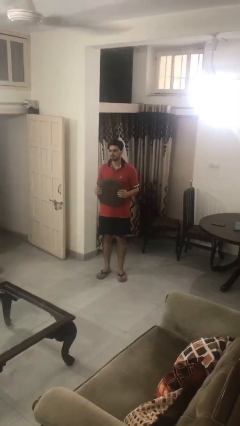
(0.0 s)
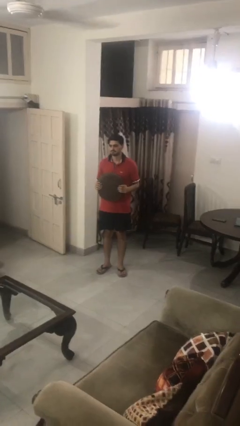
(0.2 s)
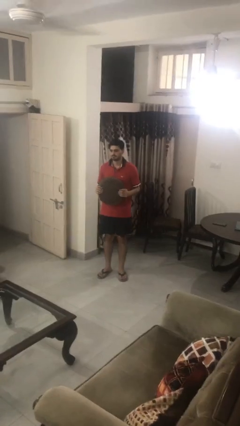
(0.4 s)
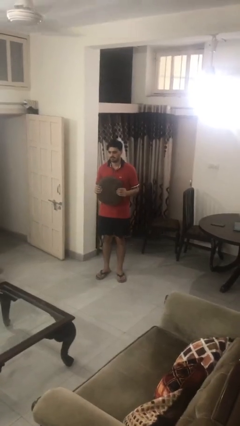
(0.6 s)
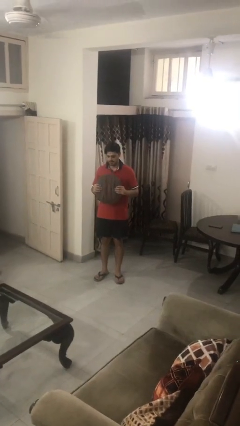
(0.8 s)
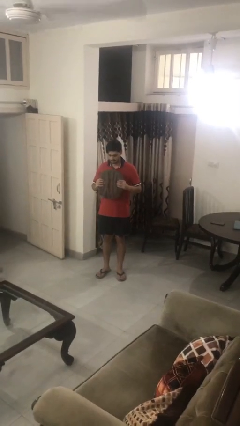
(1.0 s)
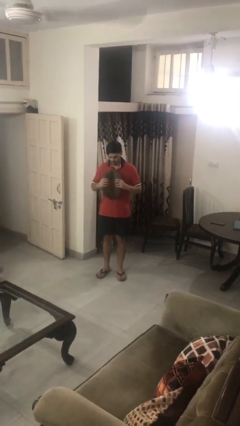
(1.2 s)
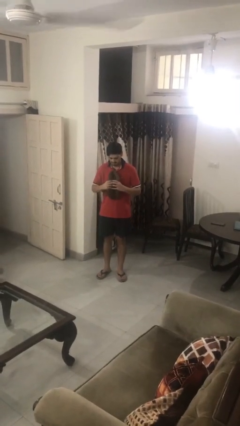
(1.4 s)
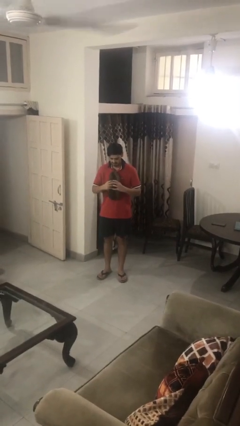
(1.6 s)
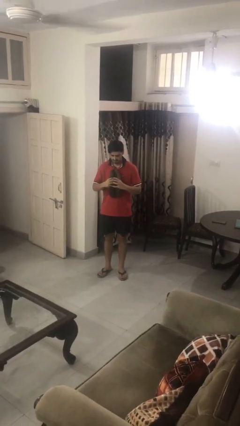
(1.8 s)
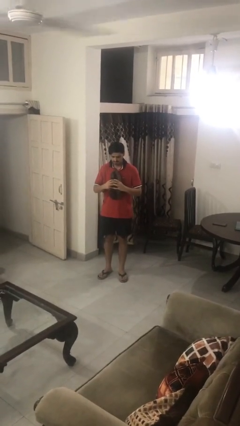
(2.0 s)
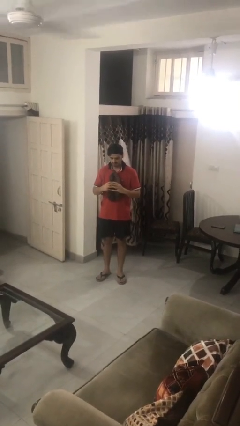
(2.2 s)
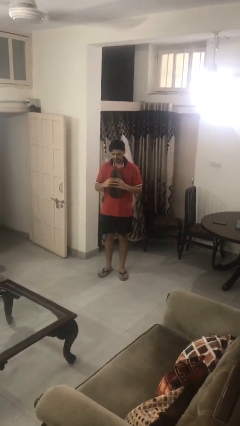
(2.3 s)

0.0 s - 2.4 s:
person squeezes object

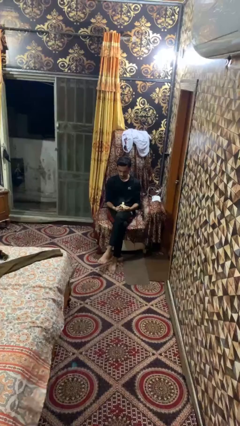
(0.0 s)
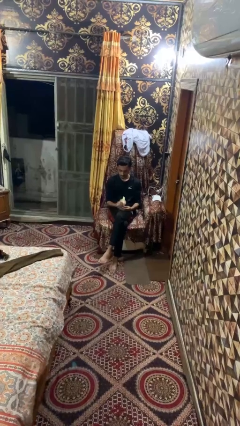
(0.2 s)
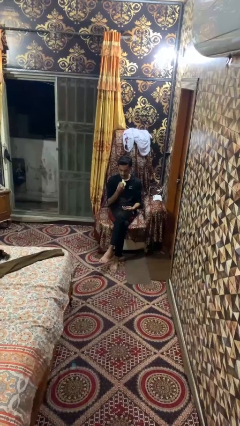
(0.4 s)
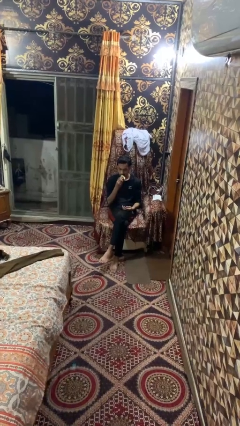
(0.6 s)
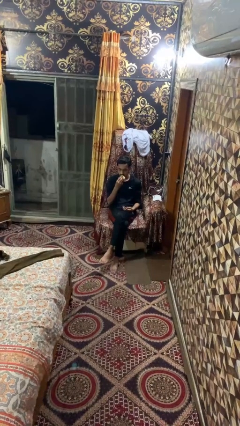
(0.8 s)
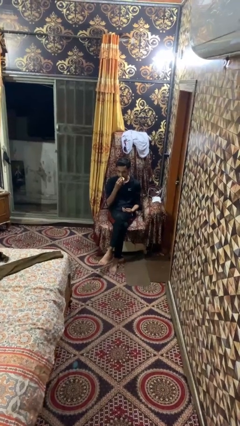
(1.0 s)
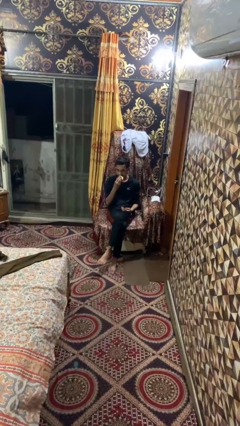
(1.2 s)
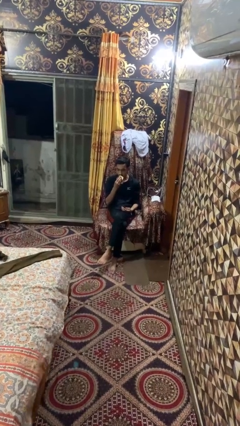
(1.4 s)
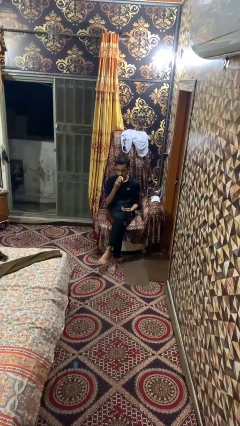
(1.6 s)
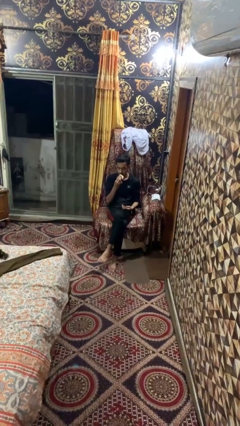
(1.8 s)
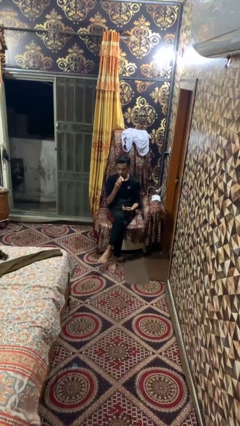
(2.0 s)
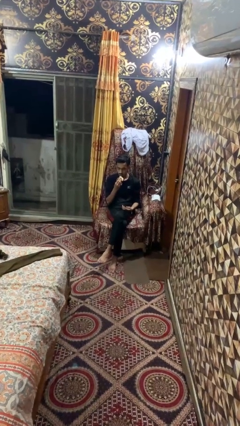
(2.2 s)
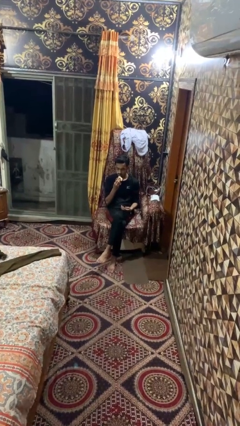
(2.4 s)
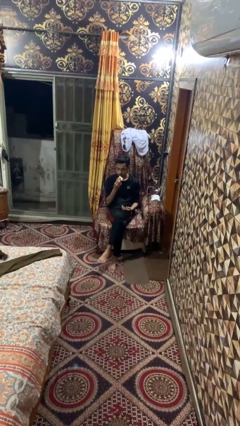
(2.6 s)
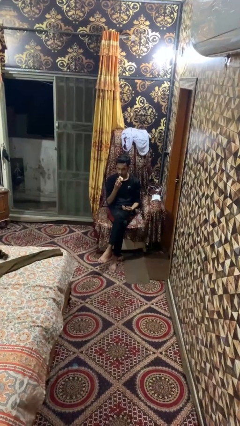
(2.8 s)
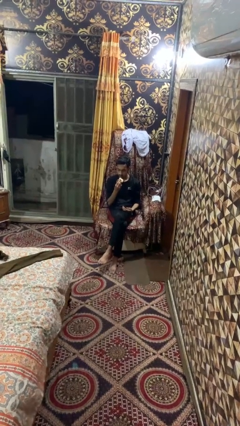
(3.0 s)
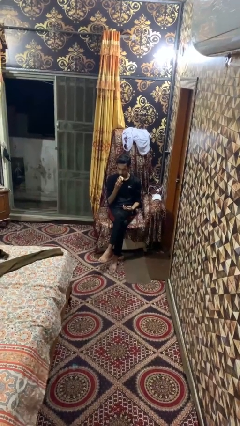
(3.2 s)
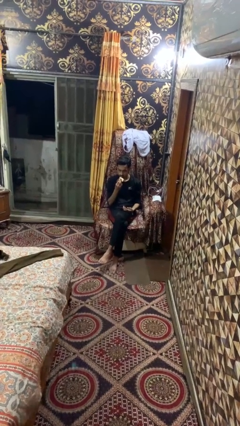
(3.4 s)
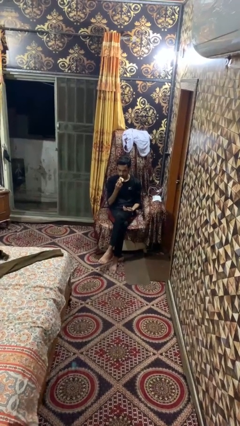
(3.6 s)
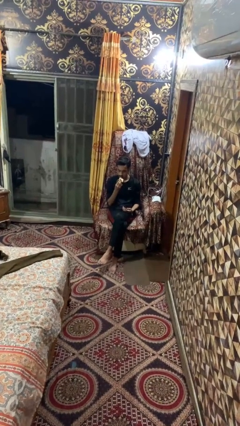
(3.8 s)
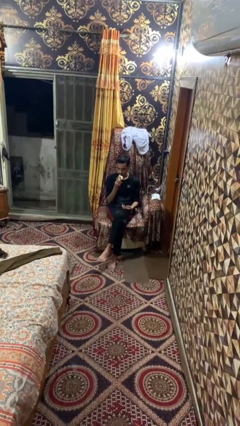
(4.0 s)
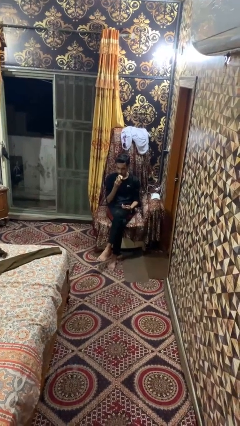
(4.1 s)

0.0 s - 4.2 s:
person eats banana

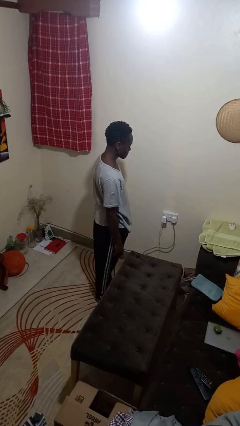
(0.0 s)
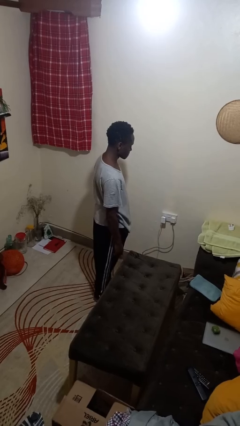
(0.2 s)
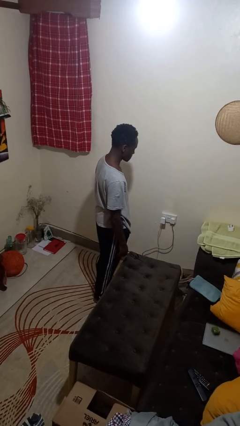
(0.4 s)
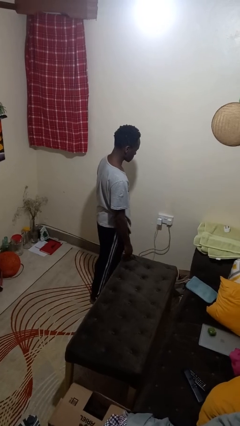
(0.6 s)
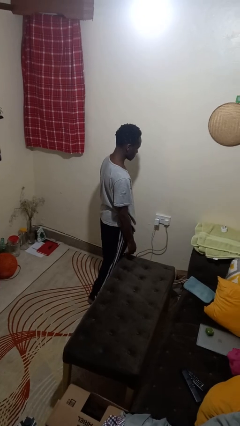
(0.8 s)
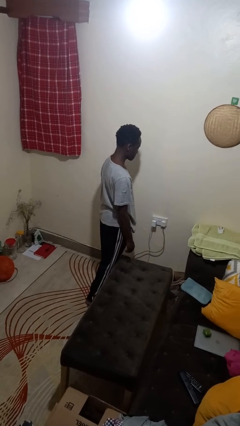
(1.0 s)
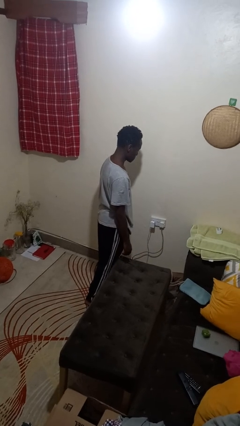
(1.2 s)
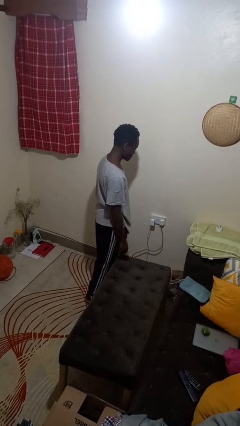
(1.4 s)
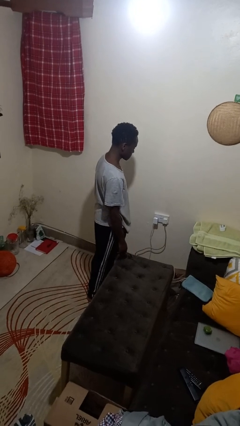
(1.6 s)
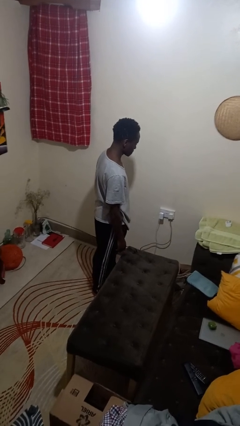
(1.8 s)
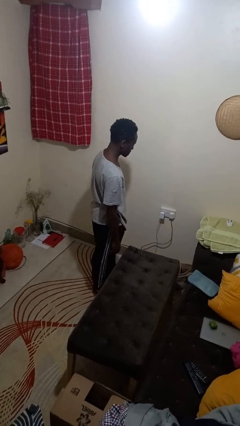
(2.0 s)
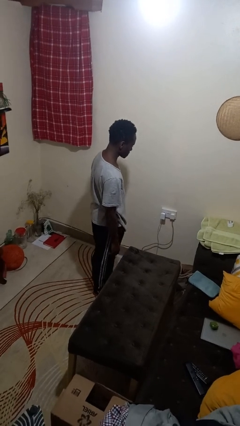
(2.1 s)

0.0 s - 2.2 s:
person bumps into table

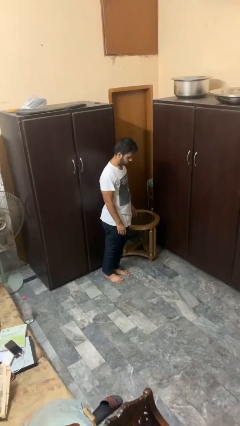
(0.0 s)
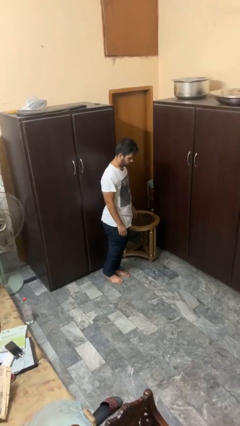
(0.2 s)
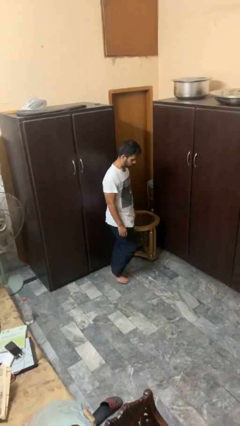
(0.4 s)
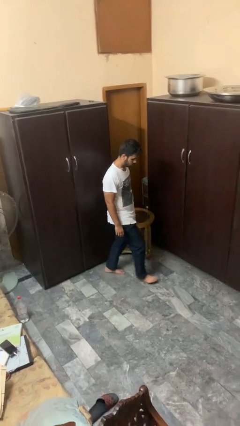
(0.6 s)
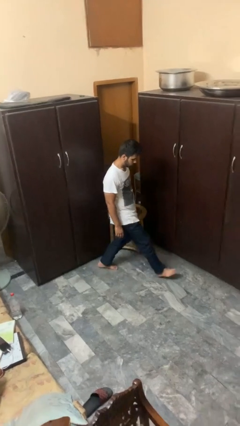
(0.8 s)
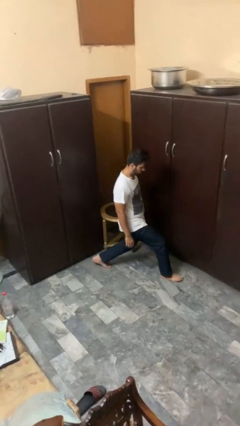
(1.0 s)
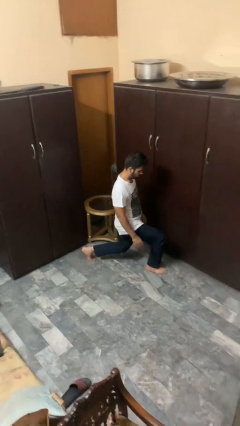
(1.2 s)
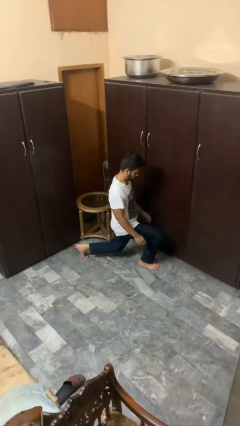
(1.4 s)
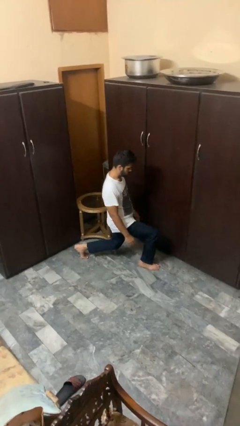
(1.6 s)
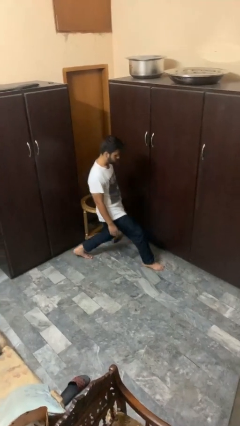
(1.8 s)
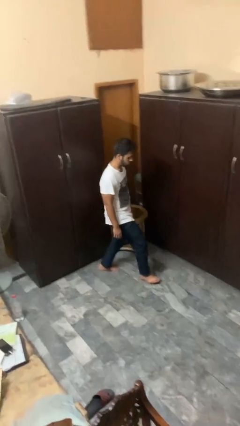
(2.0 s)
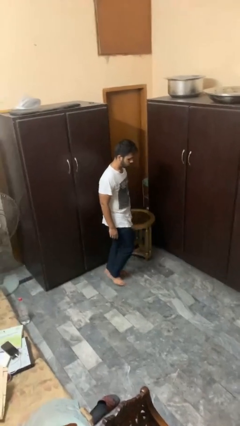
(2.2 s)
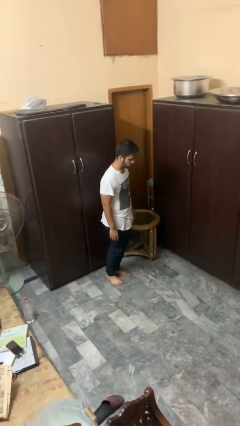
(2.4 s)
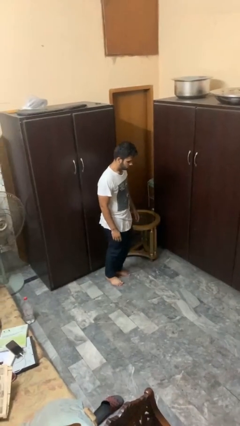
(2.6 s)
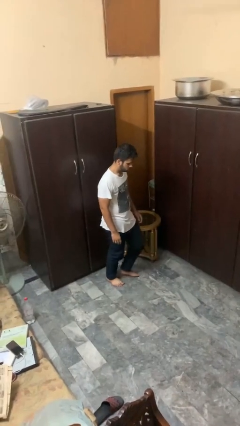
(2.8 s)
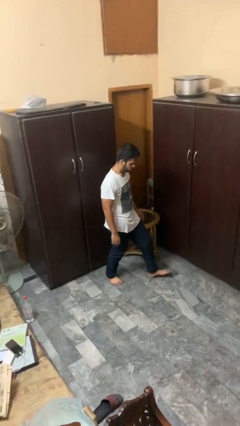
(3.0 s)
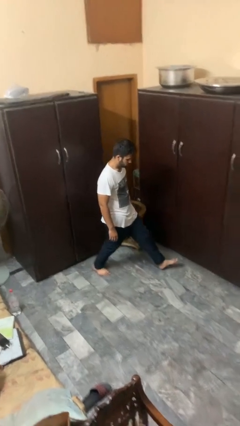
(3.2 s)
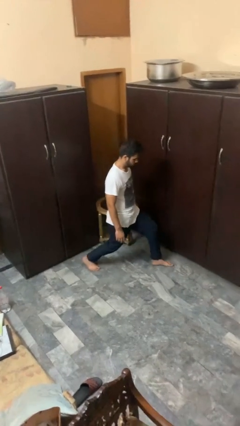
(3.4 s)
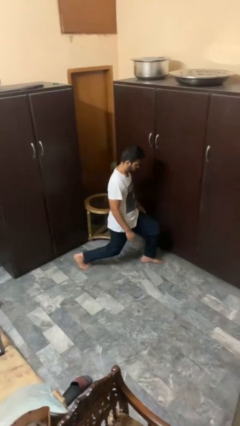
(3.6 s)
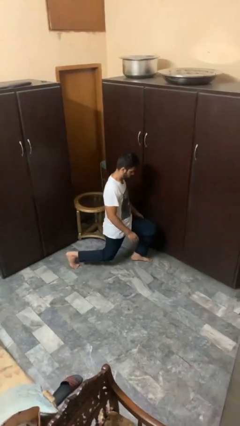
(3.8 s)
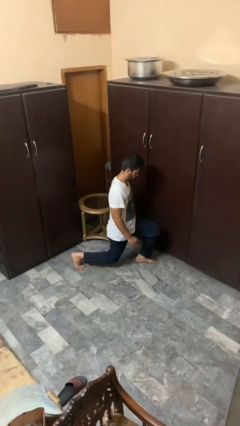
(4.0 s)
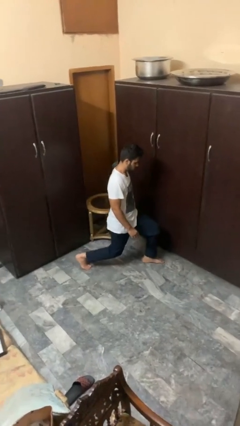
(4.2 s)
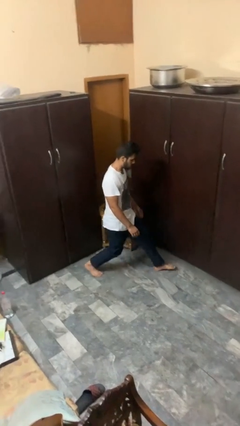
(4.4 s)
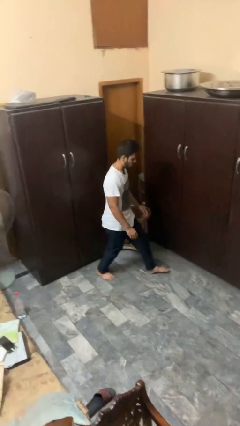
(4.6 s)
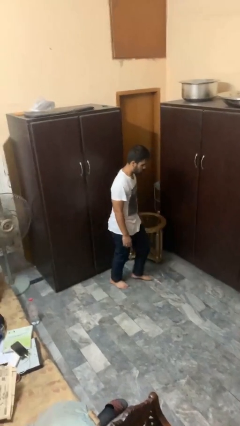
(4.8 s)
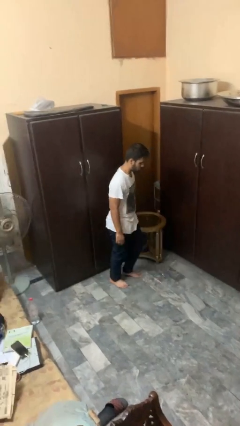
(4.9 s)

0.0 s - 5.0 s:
person exercises with lunges

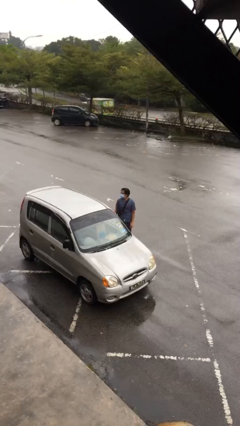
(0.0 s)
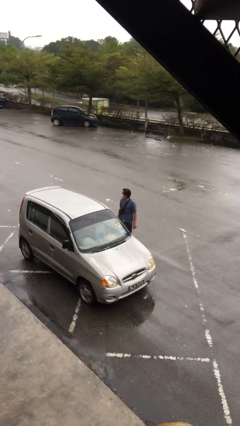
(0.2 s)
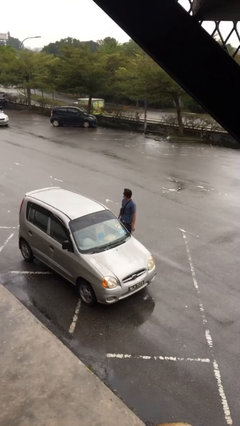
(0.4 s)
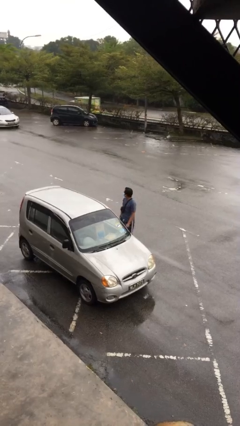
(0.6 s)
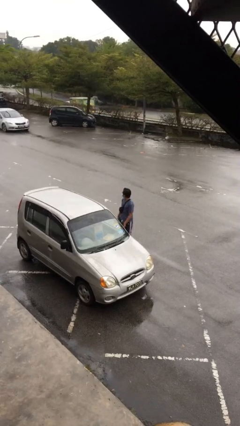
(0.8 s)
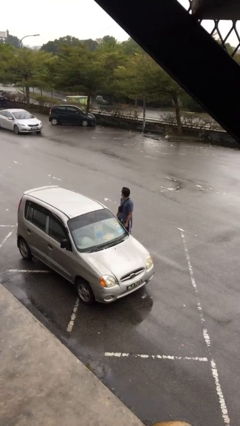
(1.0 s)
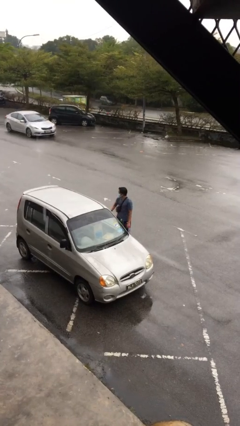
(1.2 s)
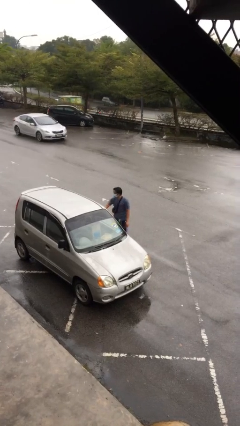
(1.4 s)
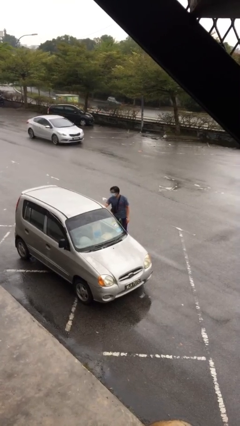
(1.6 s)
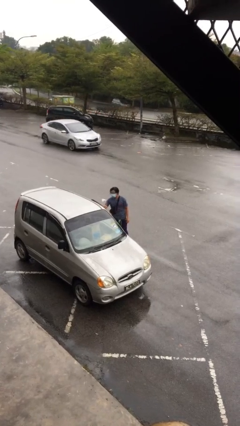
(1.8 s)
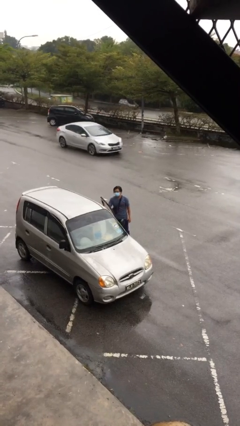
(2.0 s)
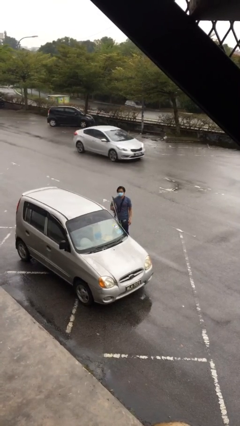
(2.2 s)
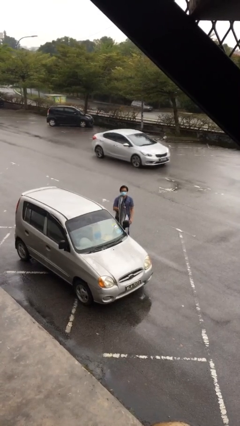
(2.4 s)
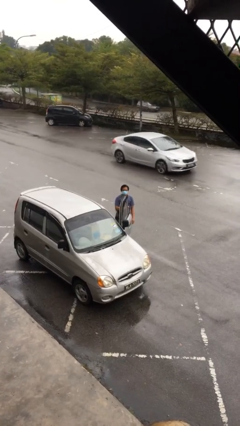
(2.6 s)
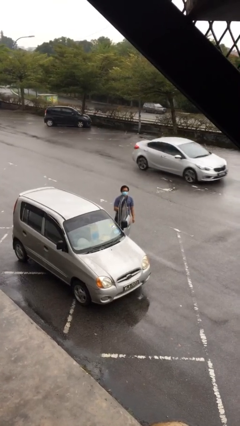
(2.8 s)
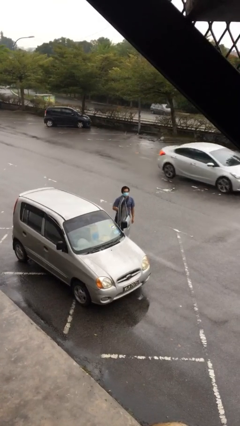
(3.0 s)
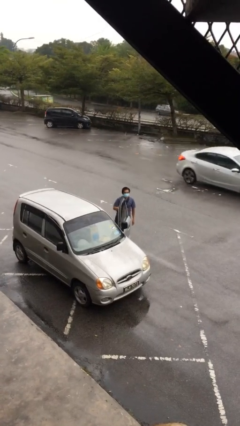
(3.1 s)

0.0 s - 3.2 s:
person opens car door

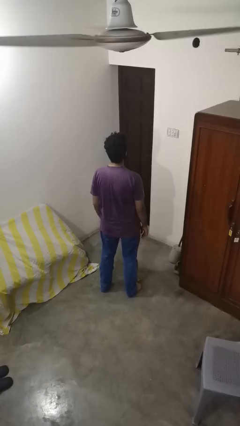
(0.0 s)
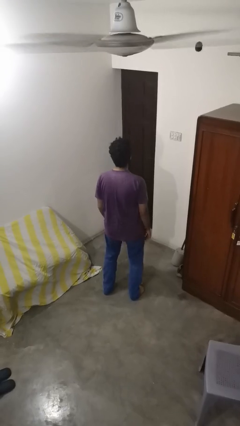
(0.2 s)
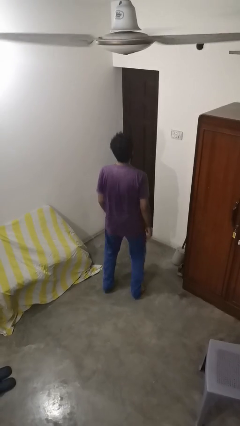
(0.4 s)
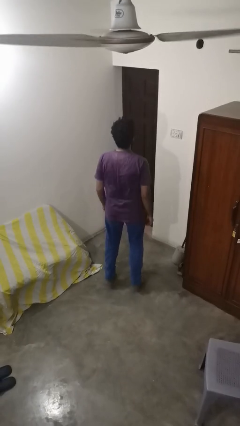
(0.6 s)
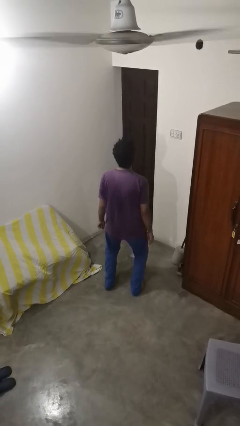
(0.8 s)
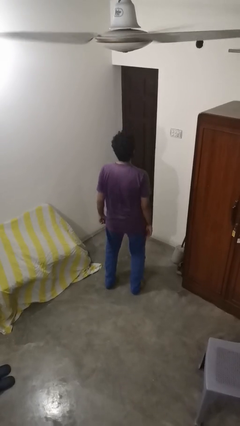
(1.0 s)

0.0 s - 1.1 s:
person jumps
